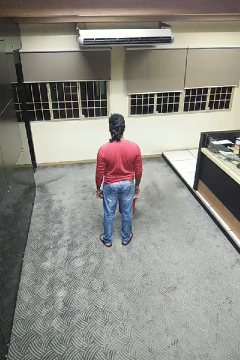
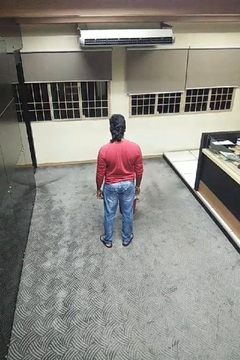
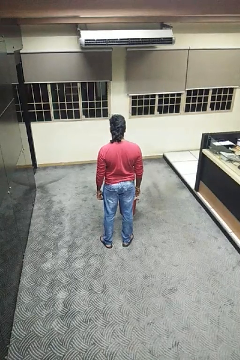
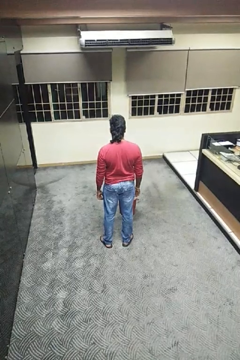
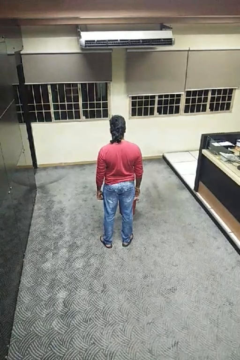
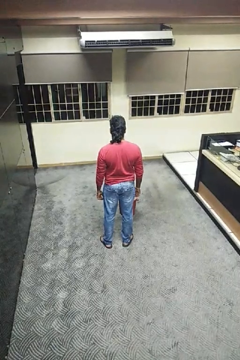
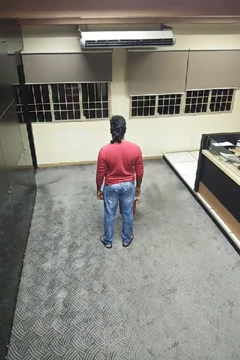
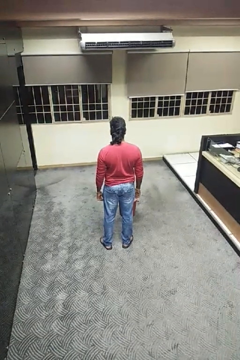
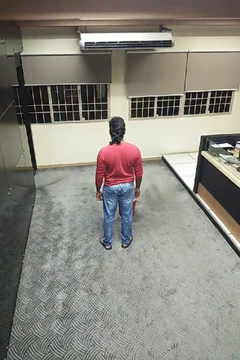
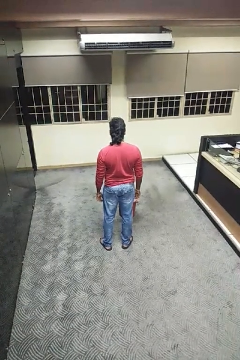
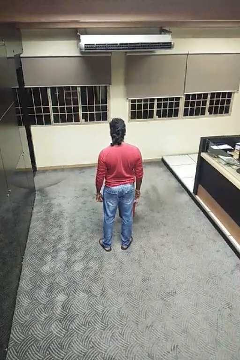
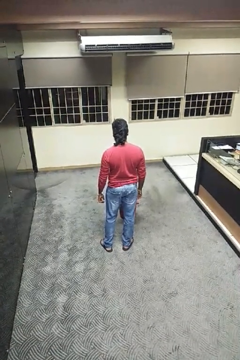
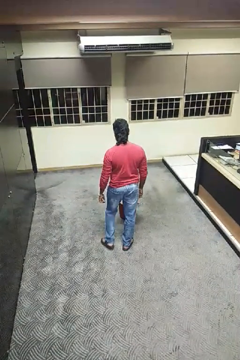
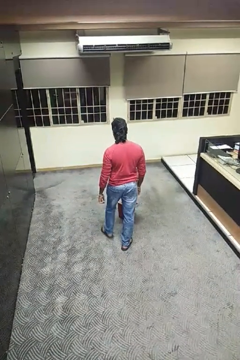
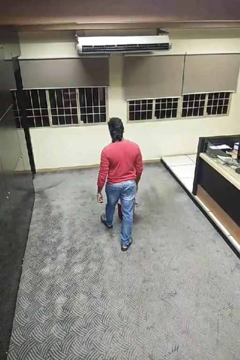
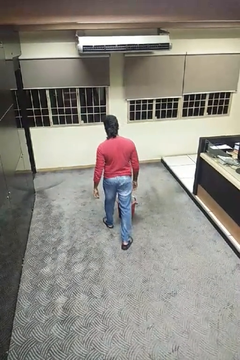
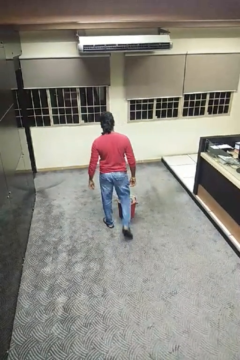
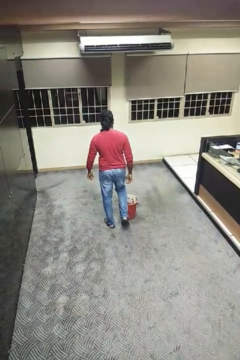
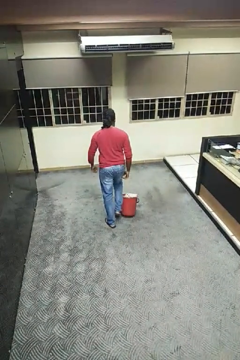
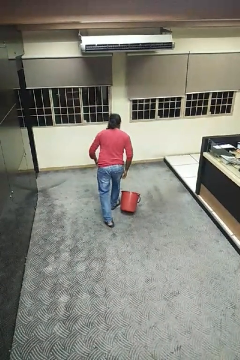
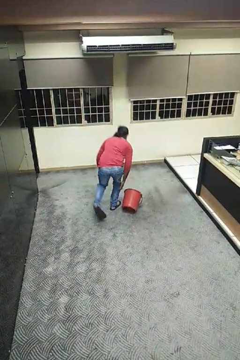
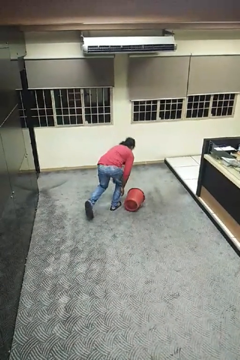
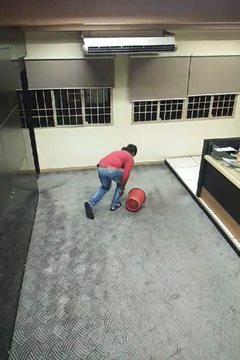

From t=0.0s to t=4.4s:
person trips on object on floor

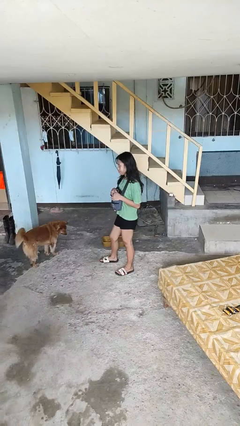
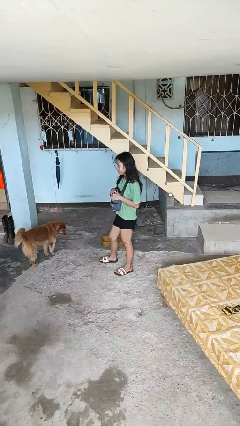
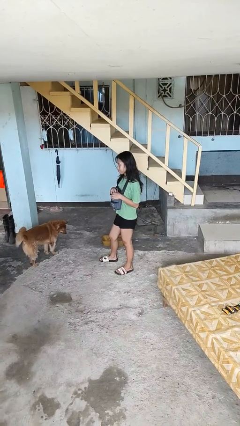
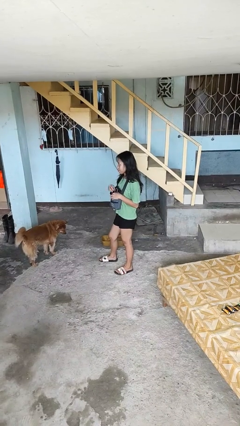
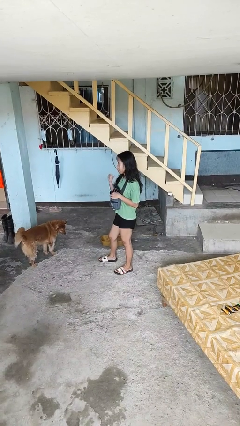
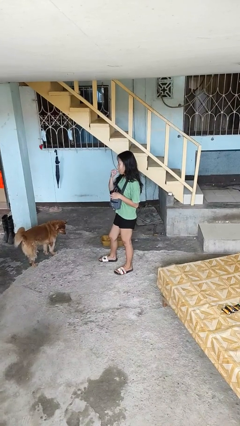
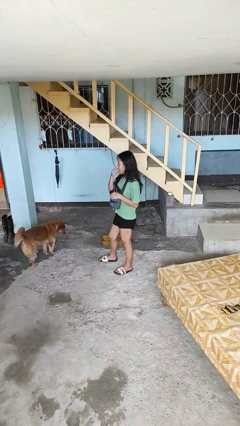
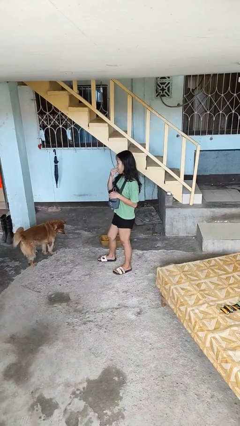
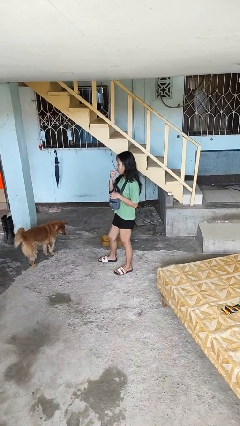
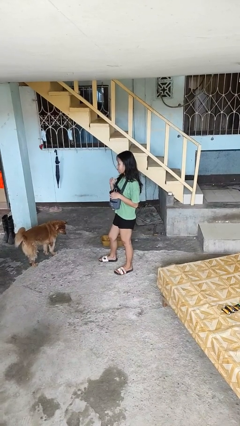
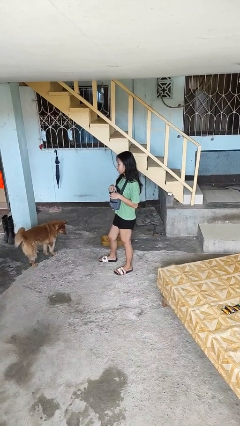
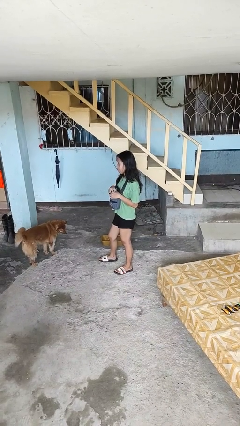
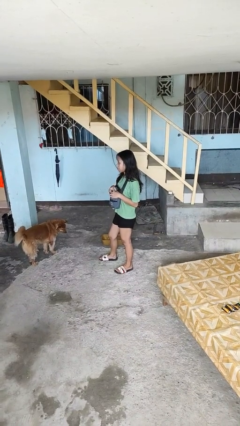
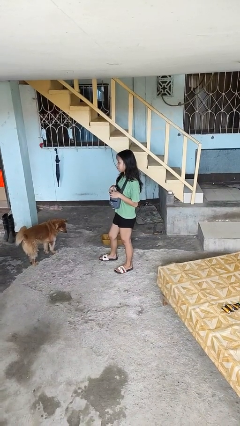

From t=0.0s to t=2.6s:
person eats snack from bag

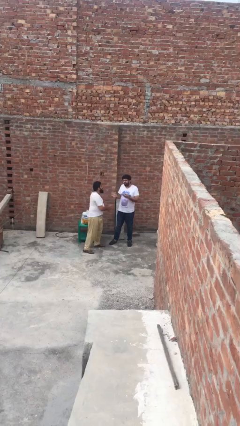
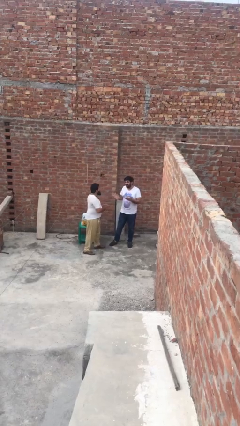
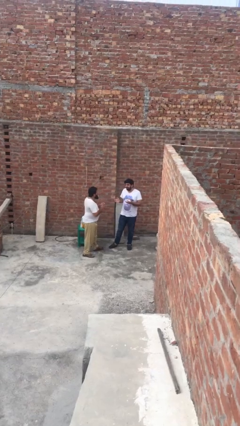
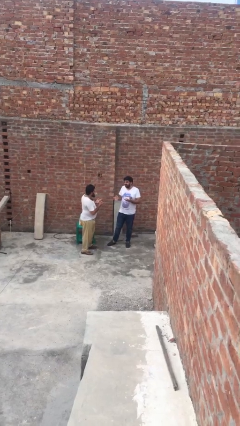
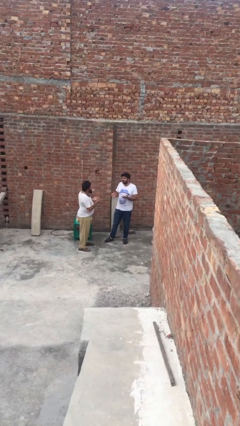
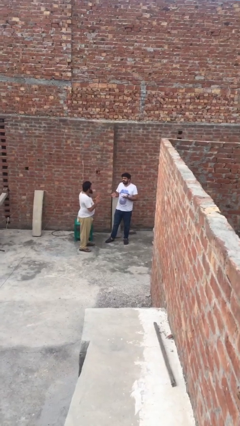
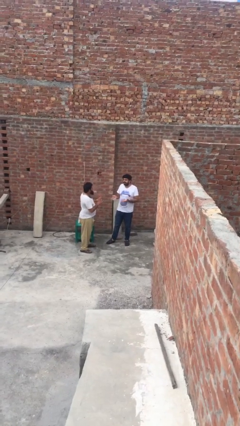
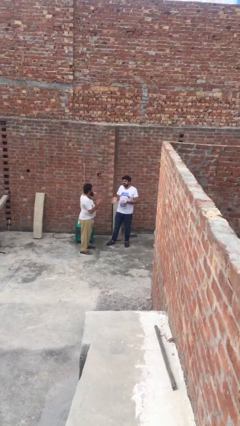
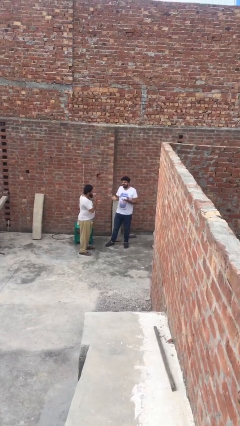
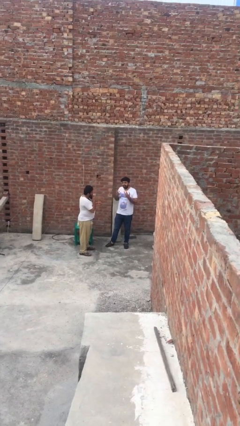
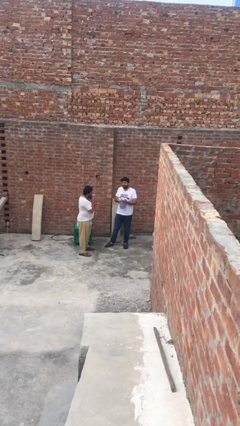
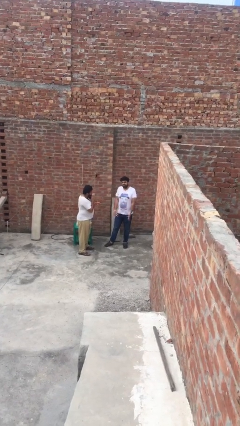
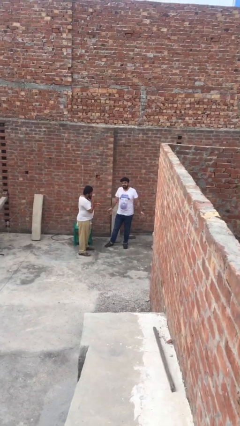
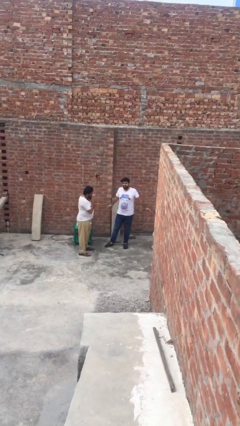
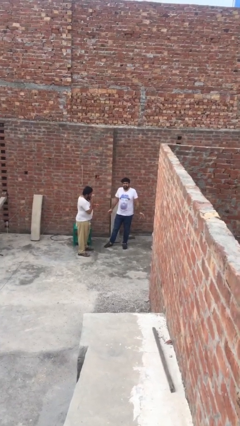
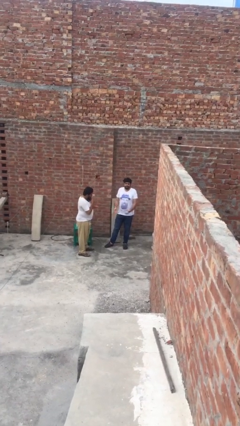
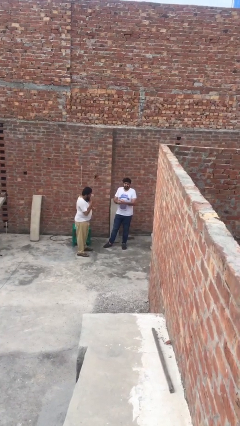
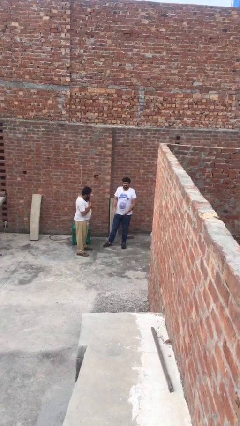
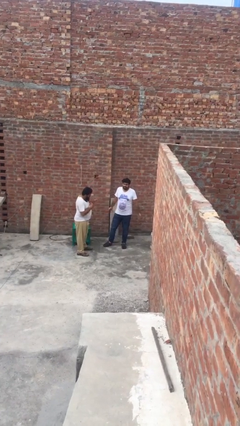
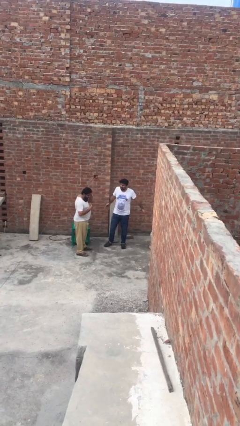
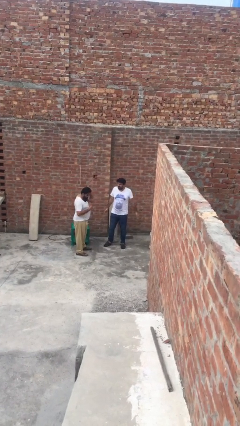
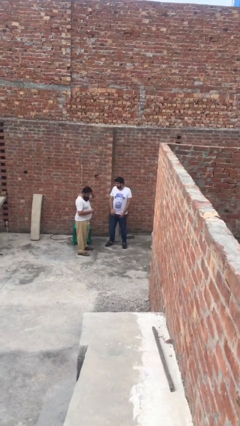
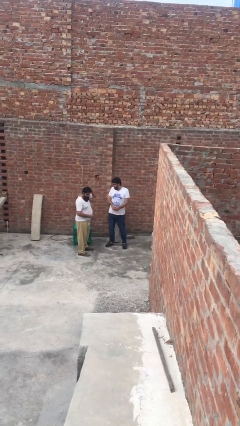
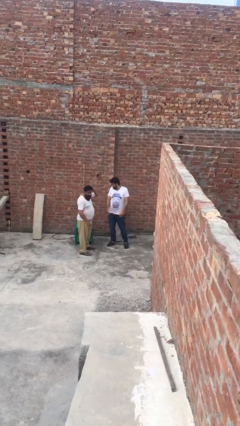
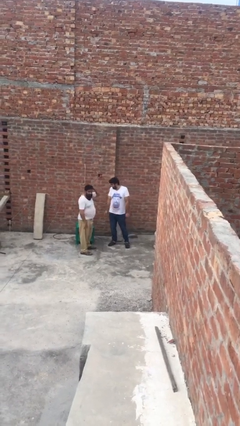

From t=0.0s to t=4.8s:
person talks to person

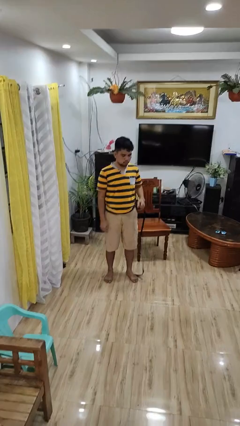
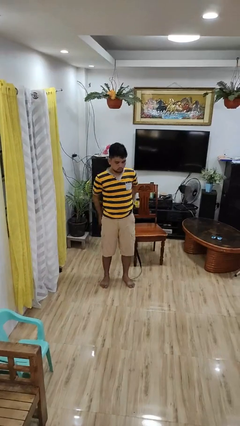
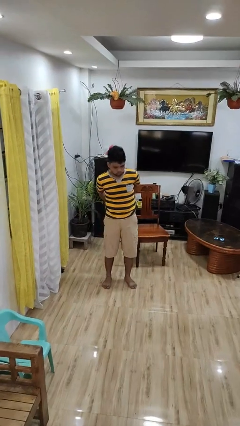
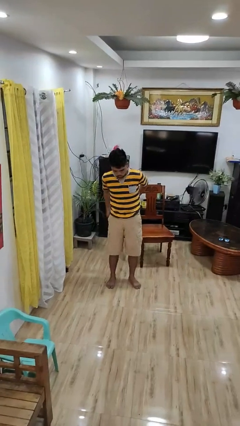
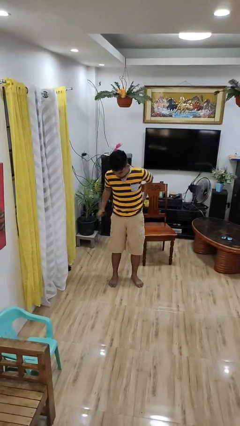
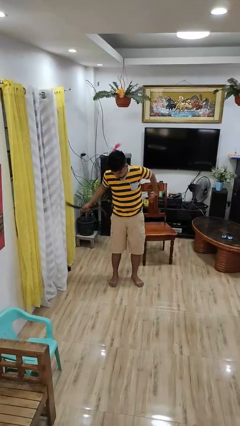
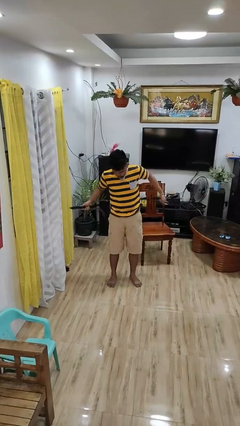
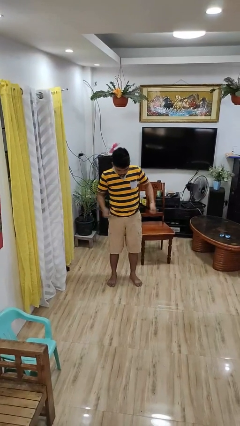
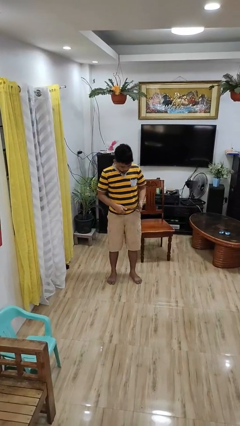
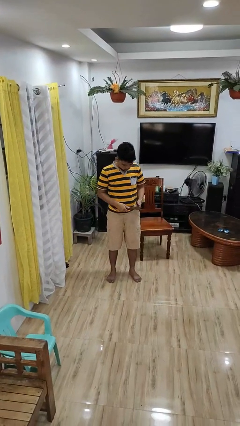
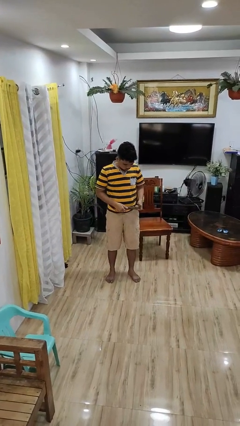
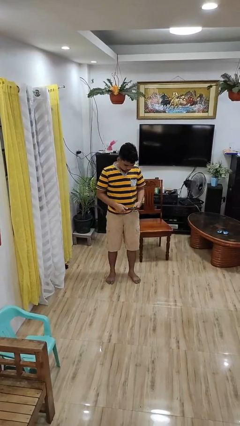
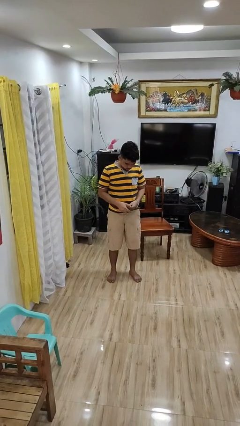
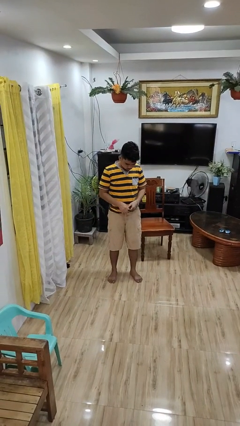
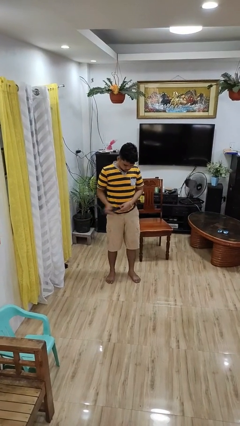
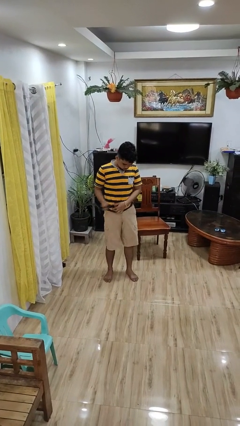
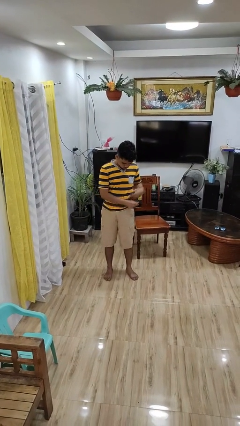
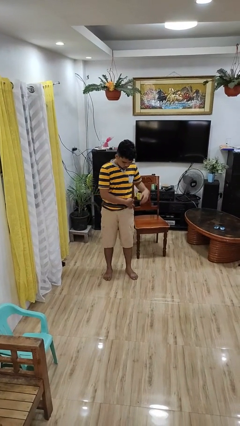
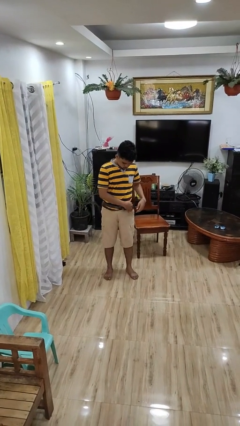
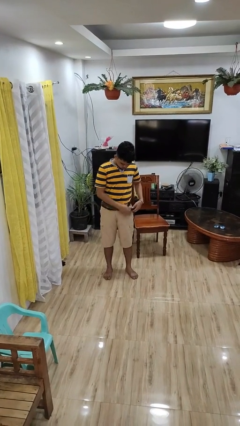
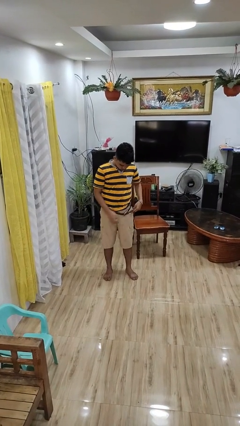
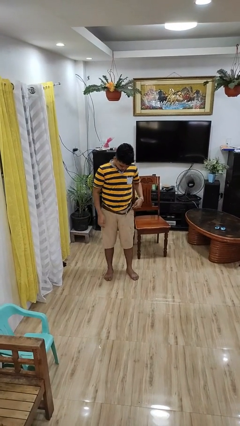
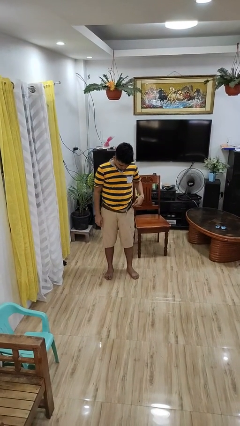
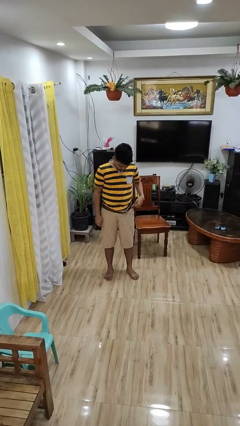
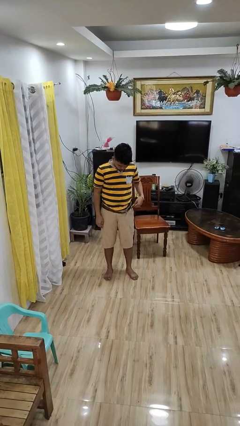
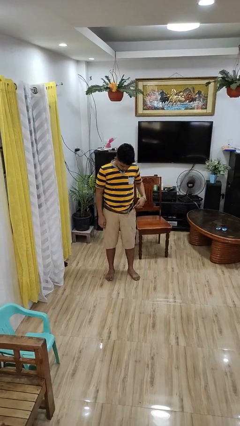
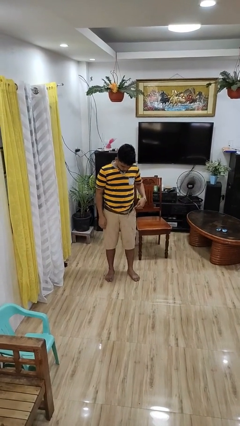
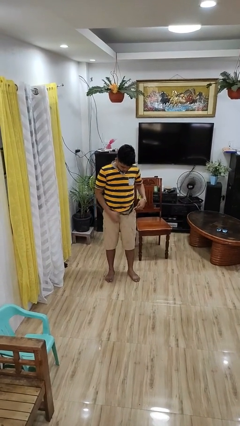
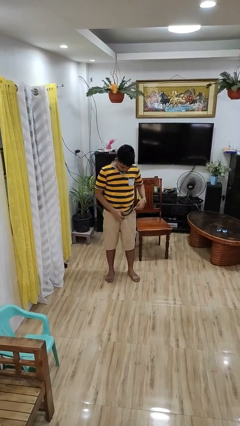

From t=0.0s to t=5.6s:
person puts on belt

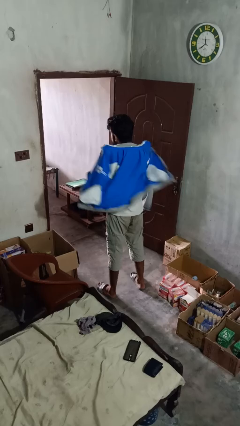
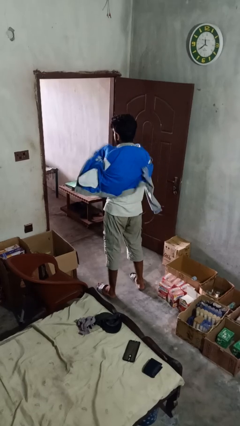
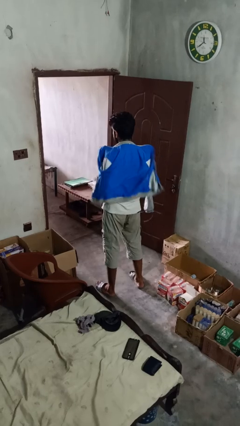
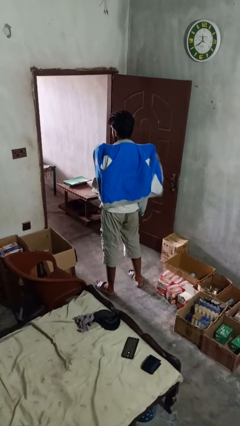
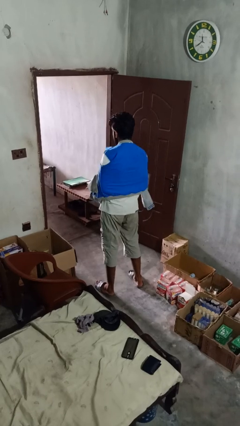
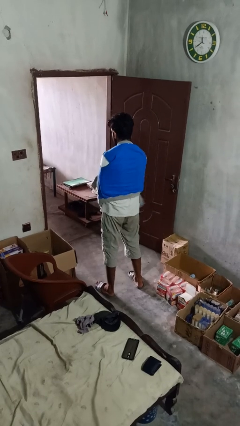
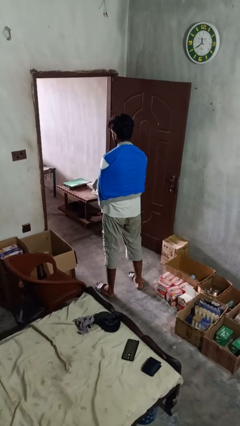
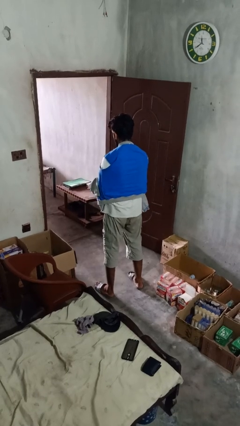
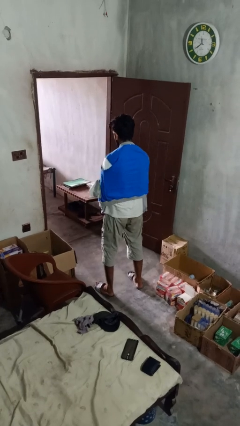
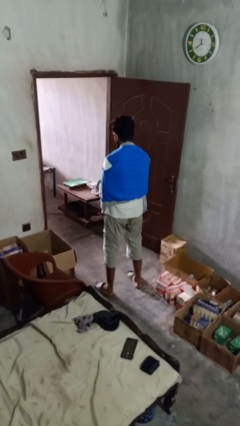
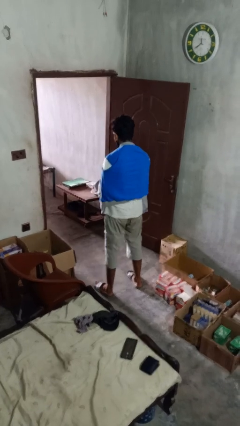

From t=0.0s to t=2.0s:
person zips up jacket
